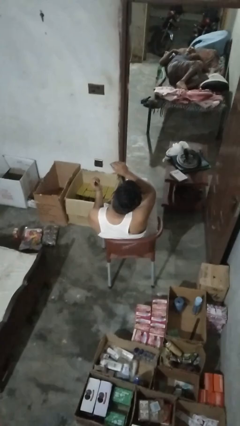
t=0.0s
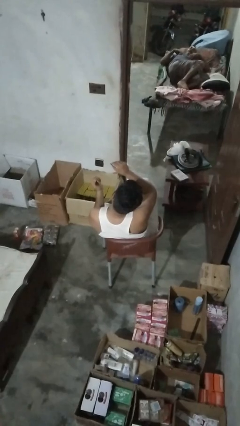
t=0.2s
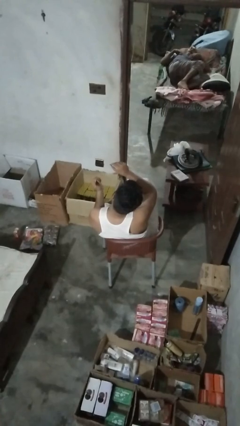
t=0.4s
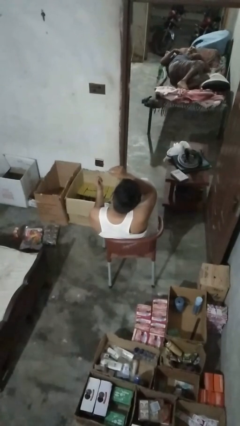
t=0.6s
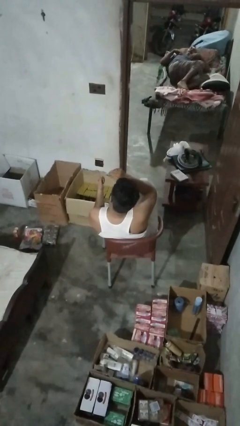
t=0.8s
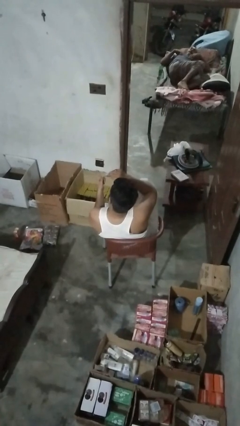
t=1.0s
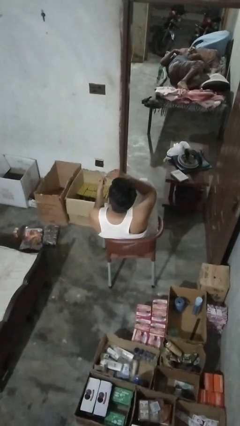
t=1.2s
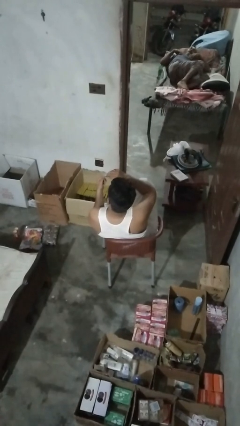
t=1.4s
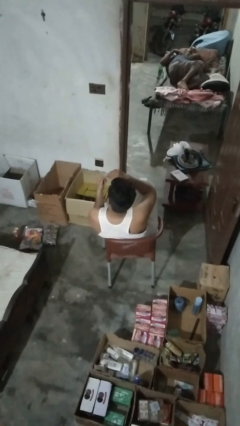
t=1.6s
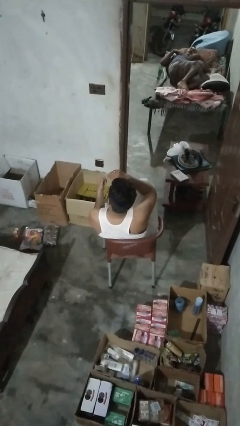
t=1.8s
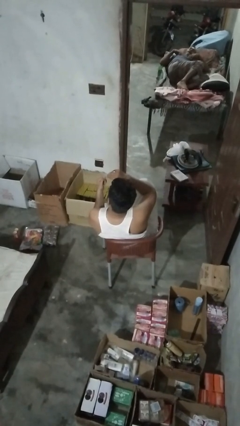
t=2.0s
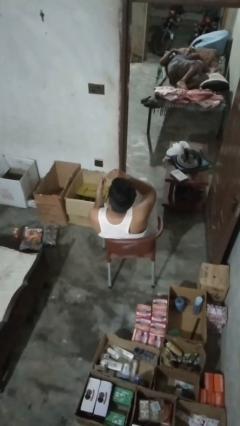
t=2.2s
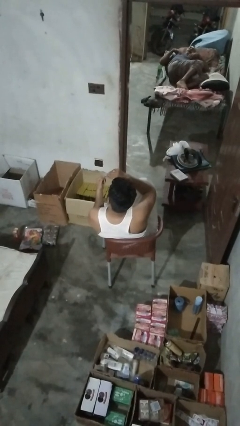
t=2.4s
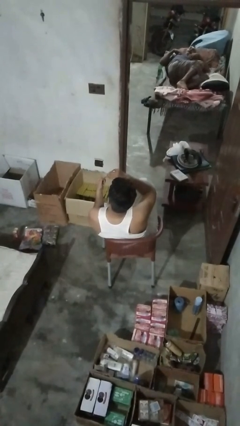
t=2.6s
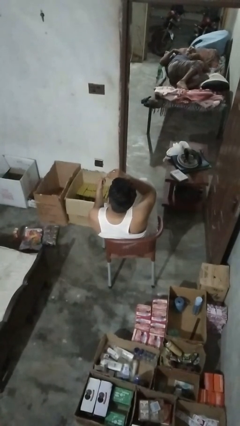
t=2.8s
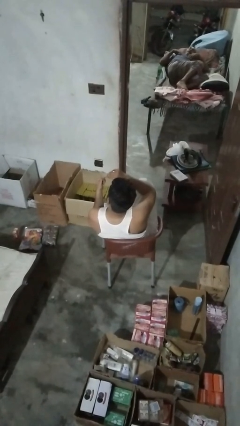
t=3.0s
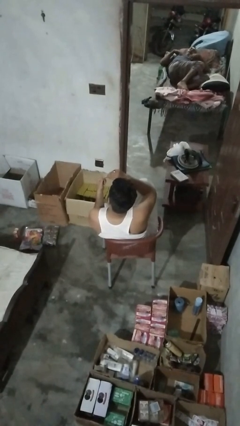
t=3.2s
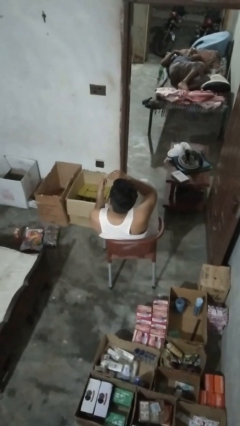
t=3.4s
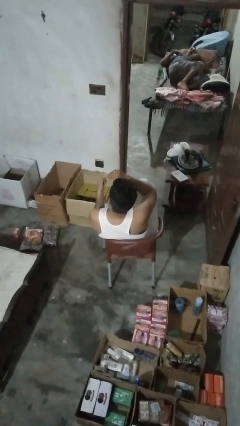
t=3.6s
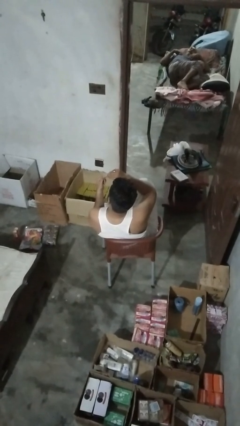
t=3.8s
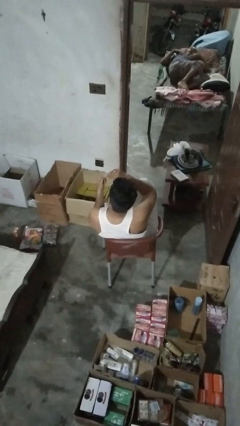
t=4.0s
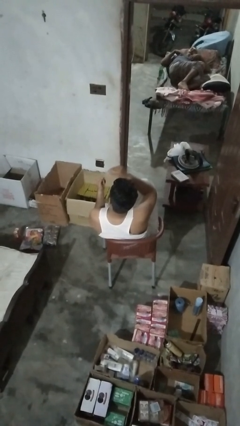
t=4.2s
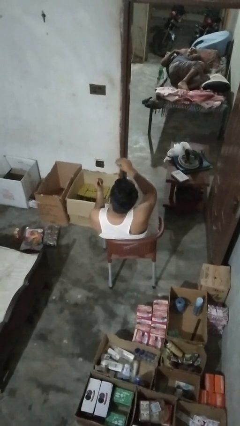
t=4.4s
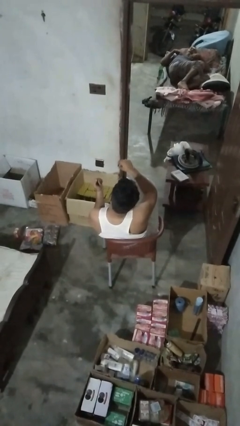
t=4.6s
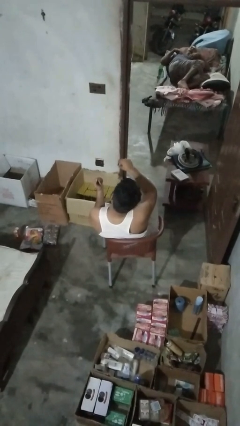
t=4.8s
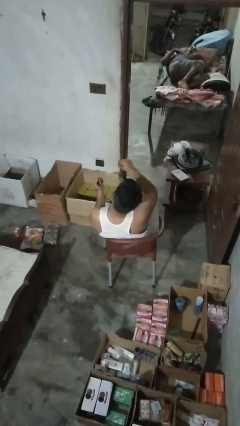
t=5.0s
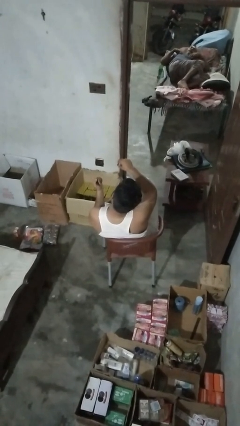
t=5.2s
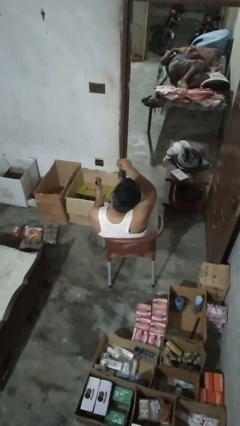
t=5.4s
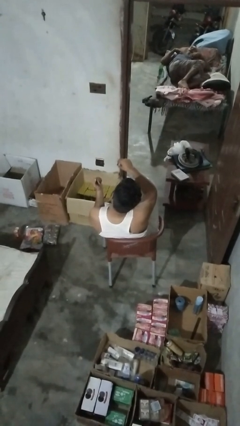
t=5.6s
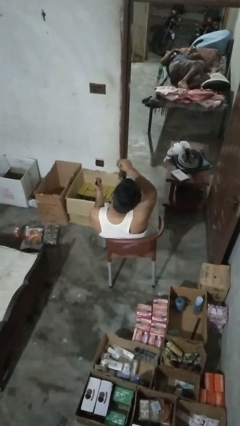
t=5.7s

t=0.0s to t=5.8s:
person clips fingernails

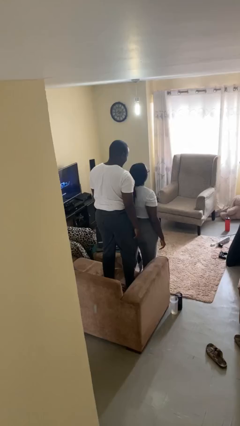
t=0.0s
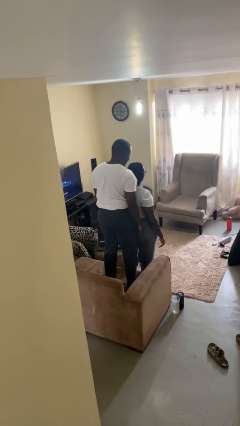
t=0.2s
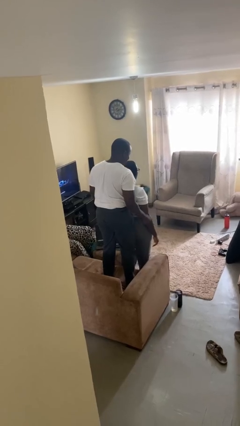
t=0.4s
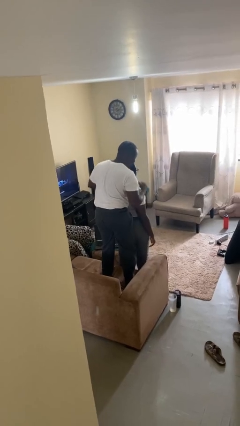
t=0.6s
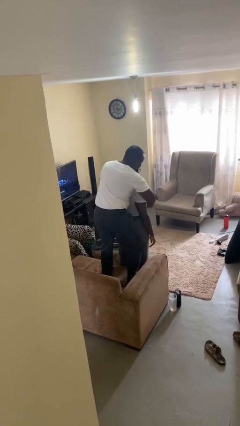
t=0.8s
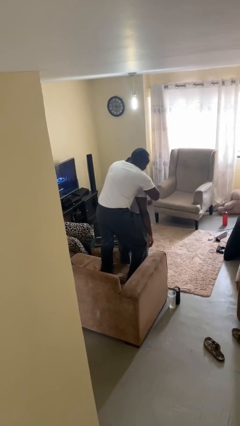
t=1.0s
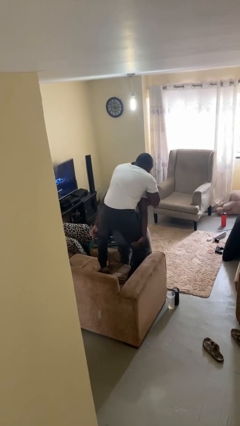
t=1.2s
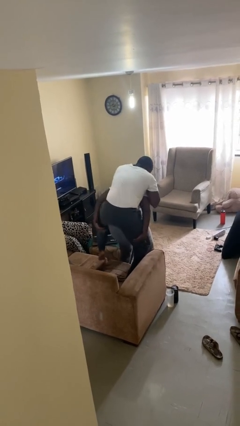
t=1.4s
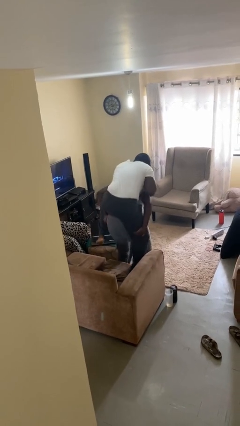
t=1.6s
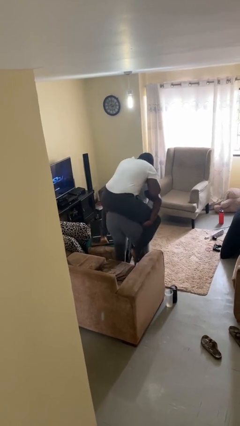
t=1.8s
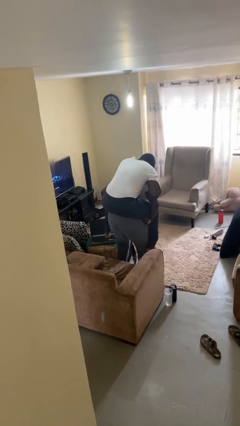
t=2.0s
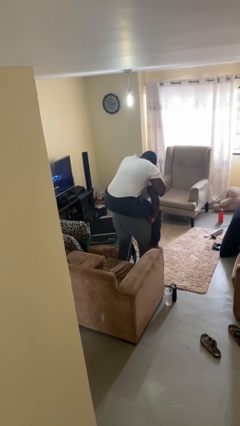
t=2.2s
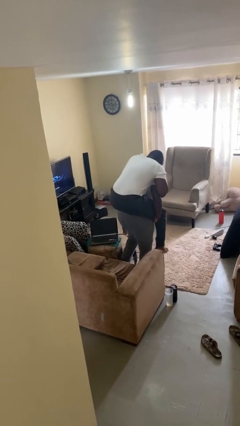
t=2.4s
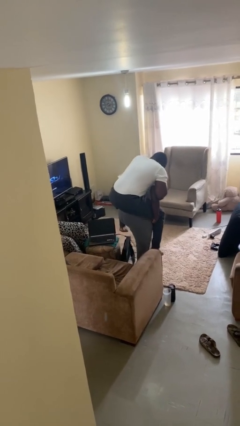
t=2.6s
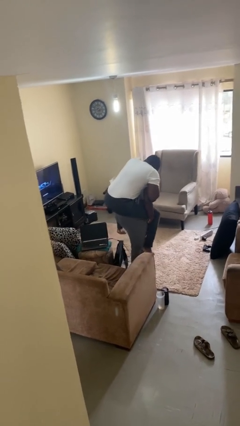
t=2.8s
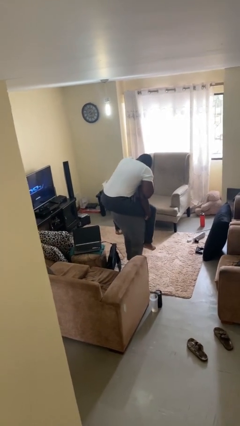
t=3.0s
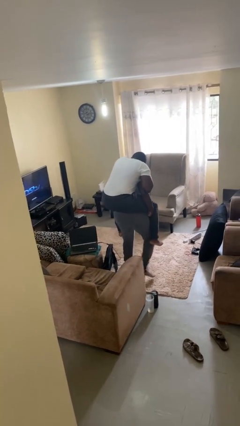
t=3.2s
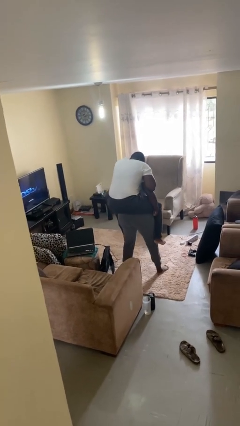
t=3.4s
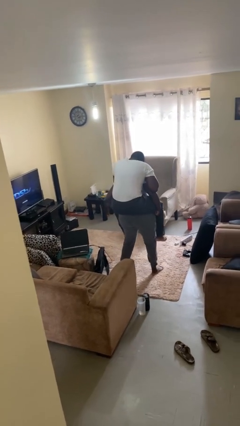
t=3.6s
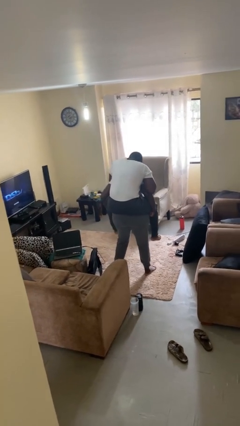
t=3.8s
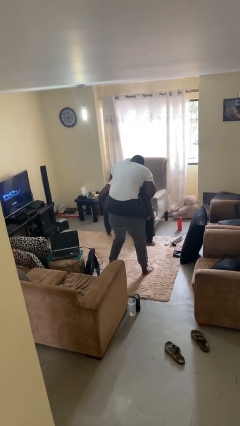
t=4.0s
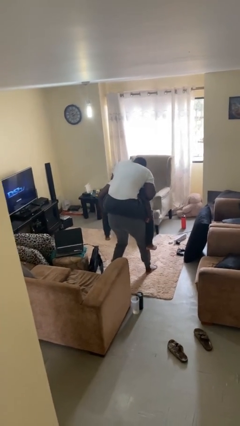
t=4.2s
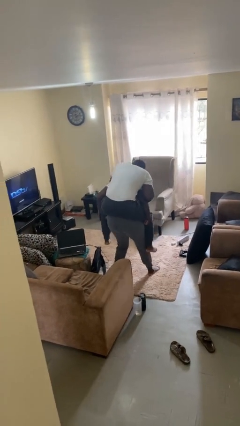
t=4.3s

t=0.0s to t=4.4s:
person carries person on back

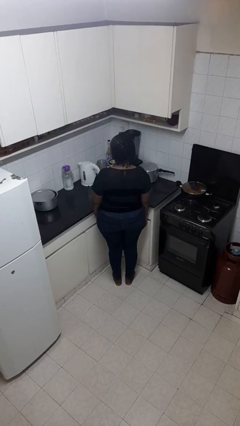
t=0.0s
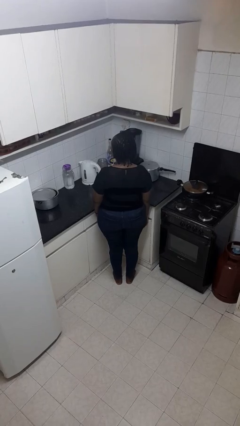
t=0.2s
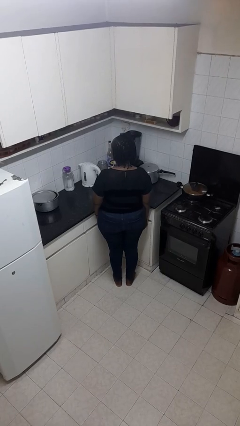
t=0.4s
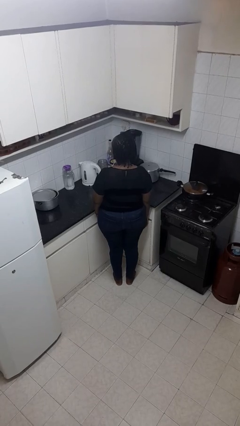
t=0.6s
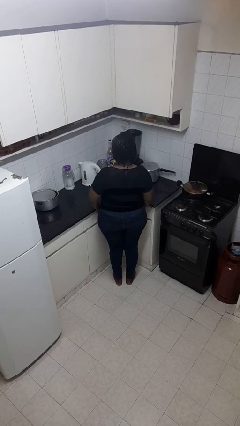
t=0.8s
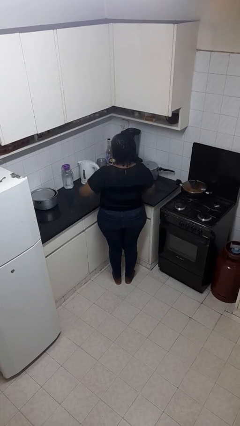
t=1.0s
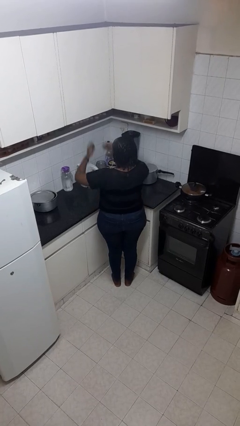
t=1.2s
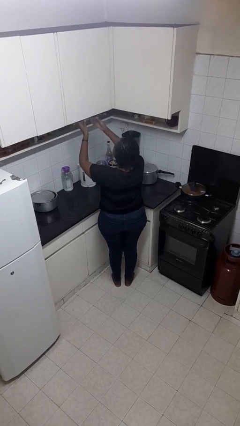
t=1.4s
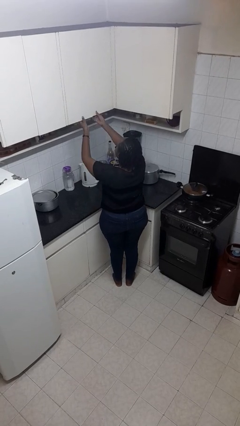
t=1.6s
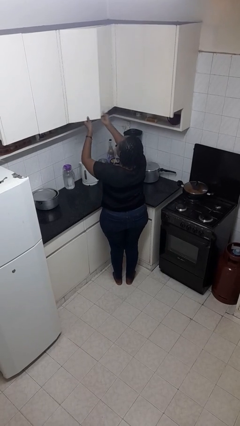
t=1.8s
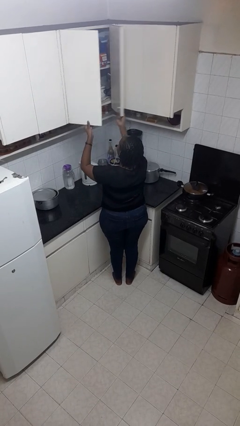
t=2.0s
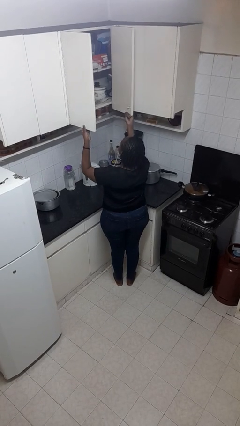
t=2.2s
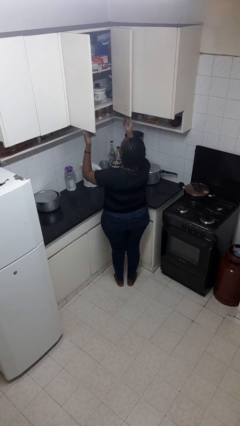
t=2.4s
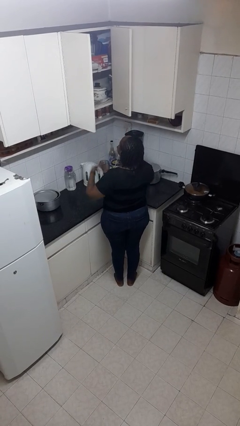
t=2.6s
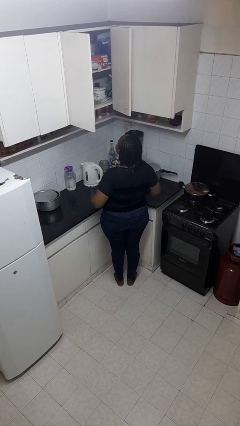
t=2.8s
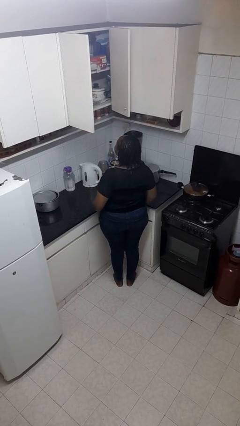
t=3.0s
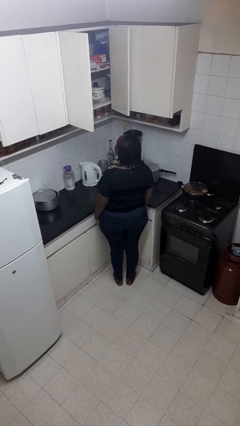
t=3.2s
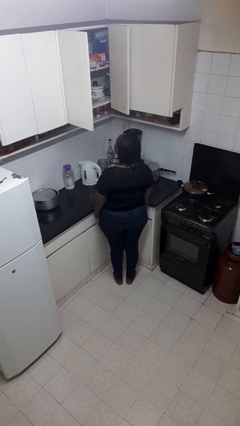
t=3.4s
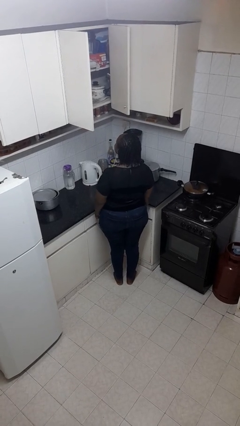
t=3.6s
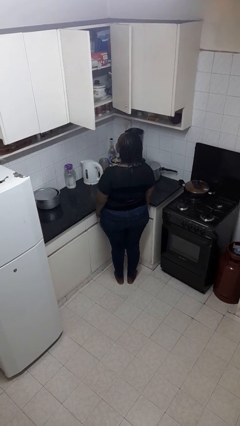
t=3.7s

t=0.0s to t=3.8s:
person opens cabinet

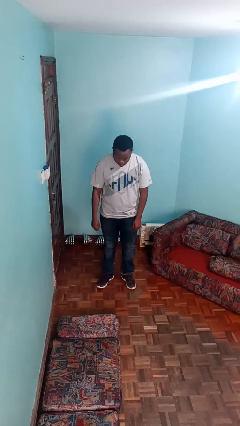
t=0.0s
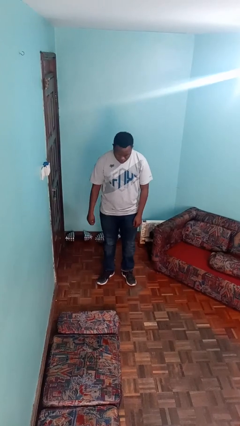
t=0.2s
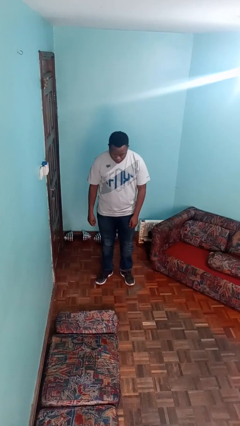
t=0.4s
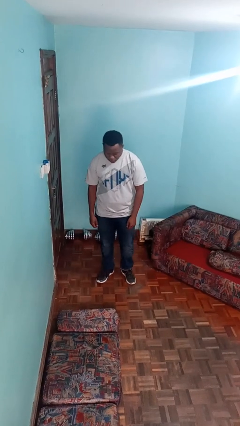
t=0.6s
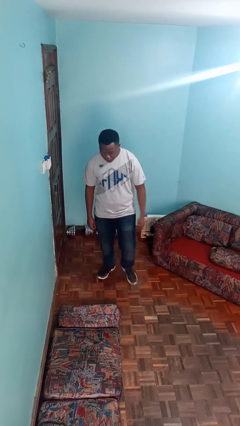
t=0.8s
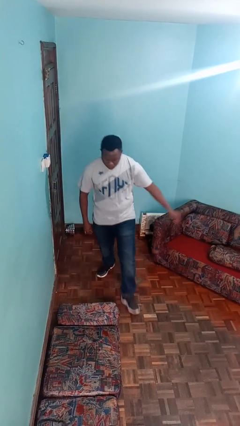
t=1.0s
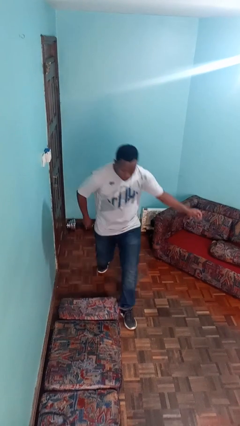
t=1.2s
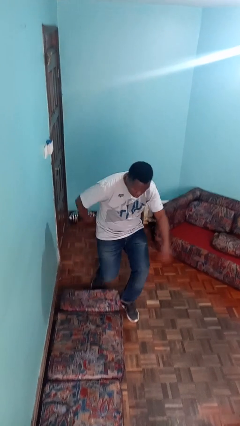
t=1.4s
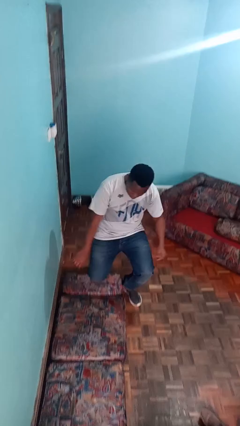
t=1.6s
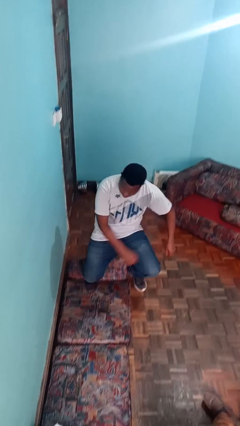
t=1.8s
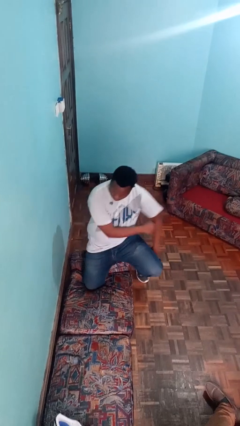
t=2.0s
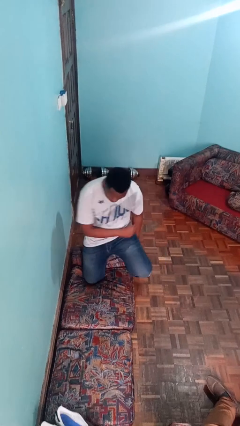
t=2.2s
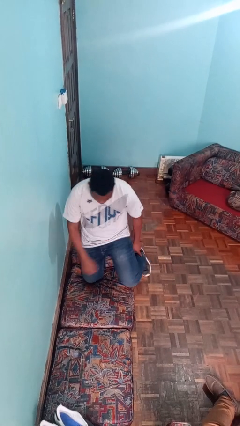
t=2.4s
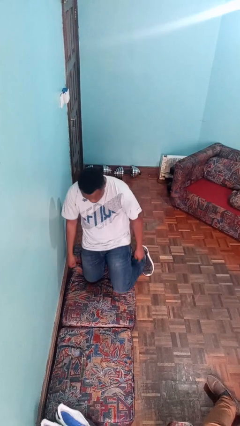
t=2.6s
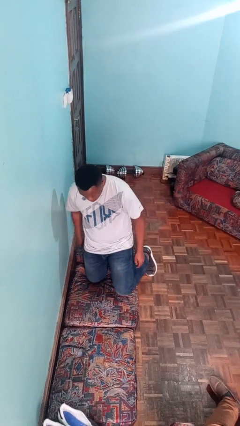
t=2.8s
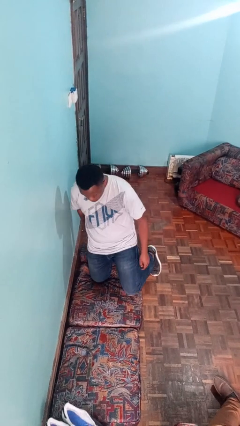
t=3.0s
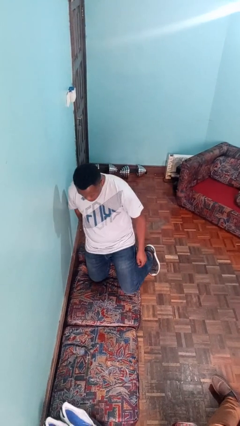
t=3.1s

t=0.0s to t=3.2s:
person trips on object on floor

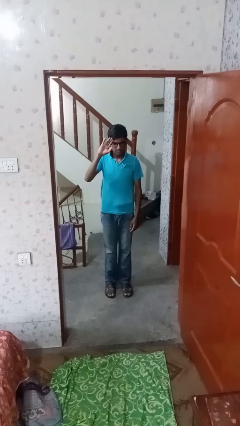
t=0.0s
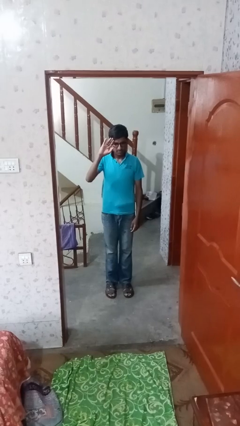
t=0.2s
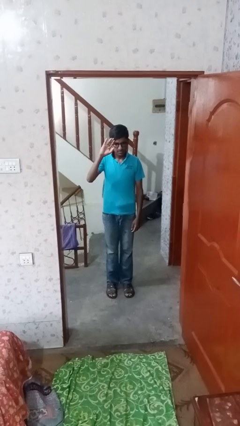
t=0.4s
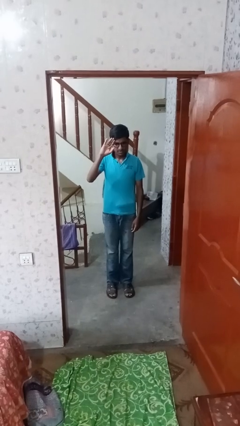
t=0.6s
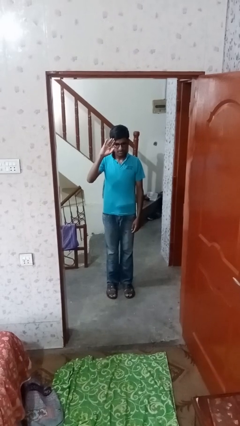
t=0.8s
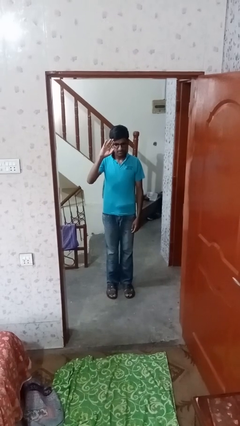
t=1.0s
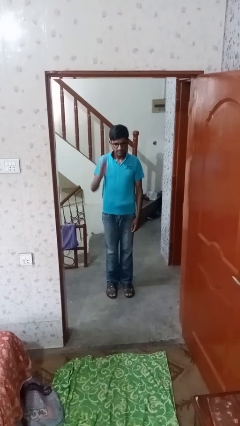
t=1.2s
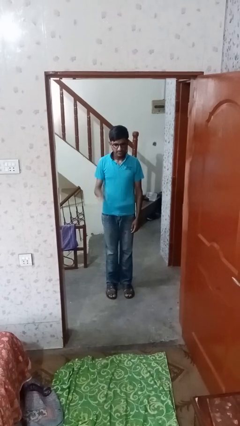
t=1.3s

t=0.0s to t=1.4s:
person salutes
